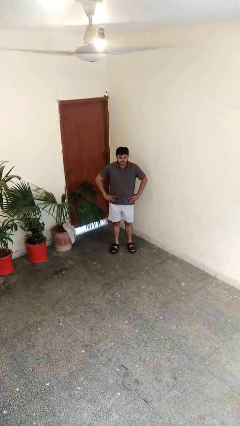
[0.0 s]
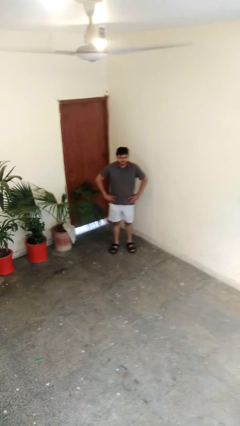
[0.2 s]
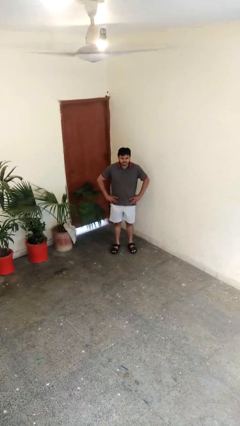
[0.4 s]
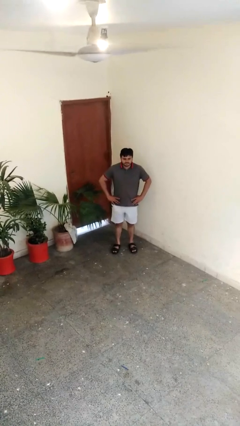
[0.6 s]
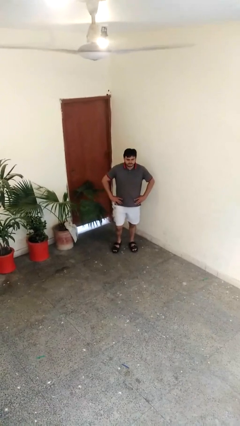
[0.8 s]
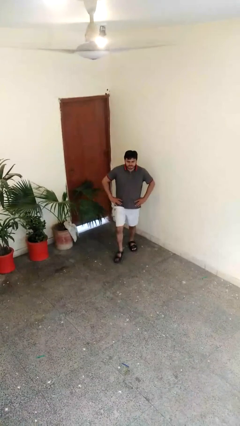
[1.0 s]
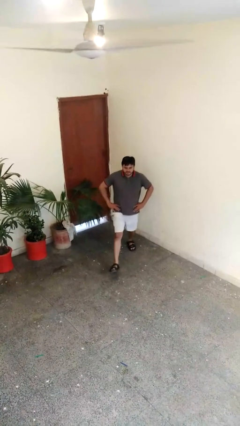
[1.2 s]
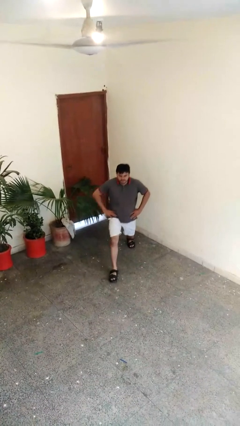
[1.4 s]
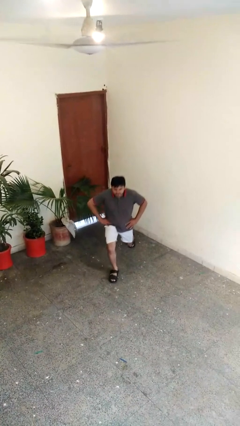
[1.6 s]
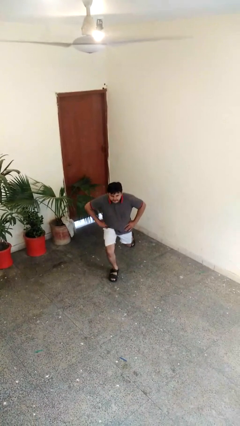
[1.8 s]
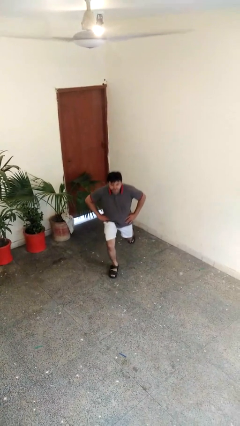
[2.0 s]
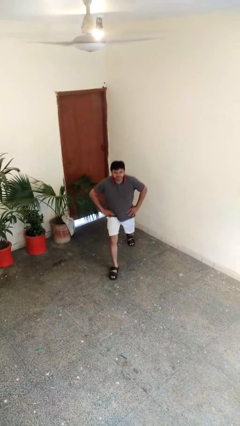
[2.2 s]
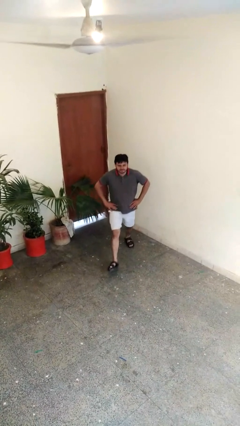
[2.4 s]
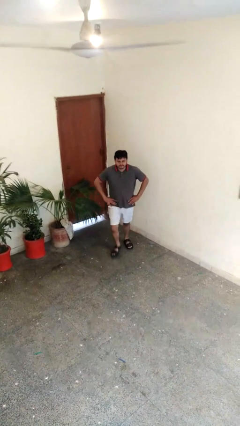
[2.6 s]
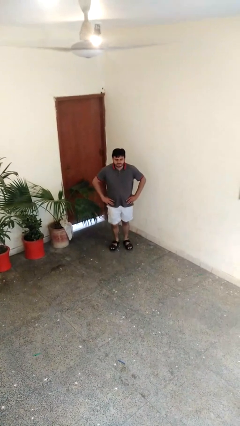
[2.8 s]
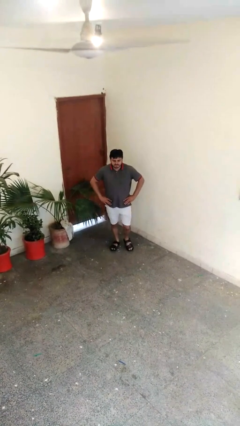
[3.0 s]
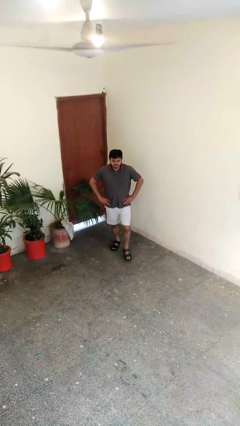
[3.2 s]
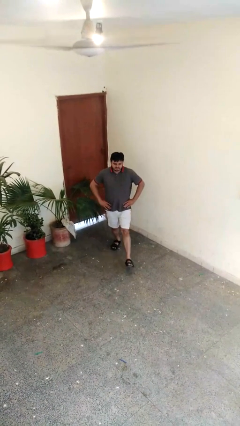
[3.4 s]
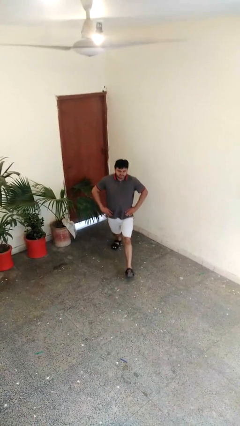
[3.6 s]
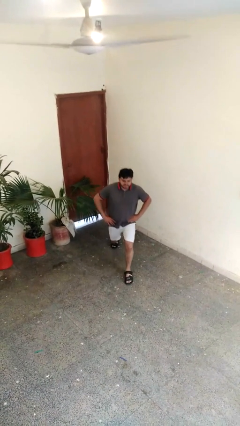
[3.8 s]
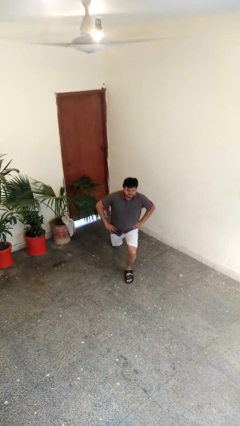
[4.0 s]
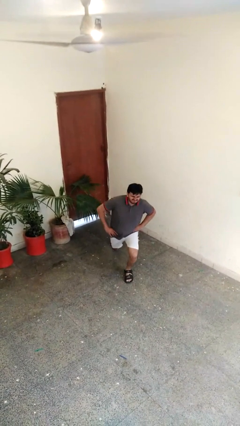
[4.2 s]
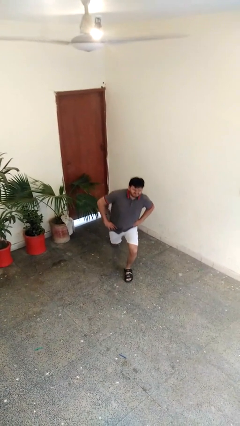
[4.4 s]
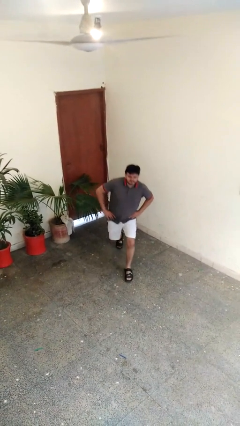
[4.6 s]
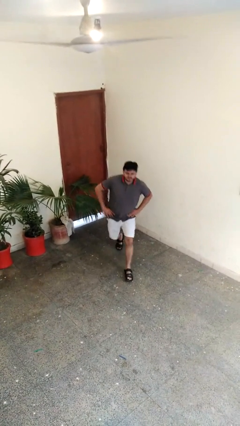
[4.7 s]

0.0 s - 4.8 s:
person exercises with lunges

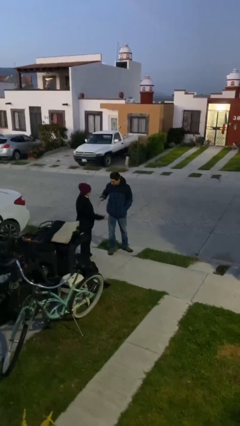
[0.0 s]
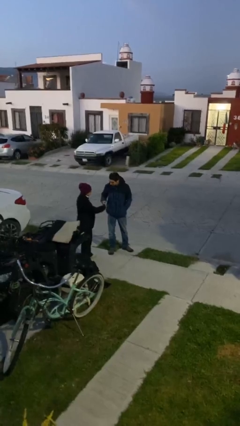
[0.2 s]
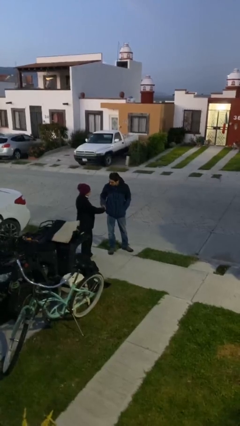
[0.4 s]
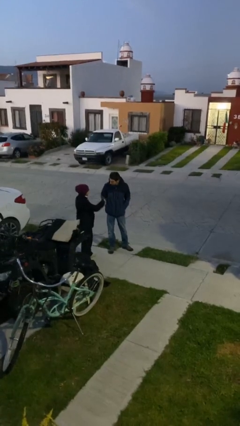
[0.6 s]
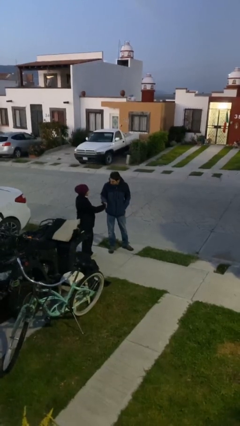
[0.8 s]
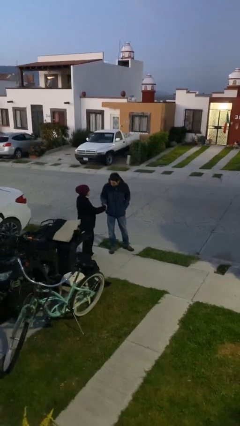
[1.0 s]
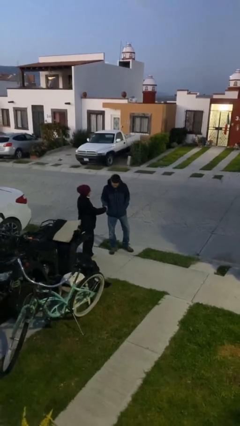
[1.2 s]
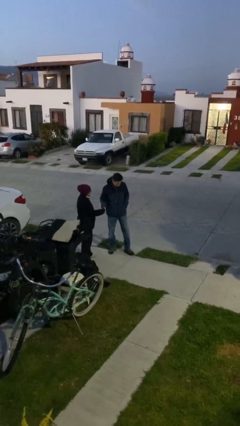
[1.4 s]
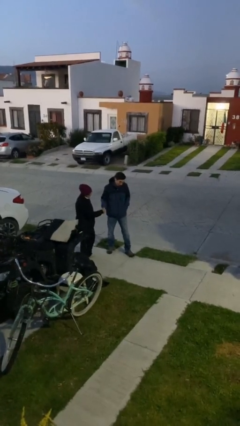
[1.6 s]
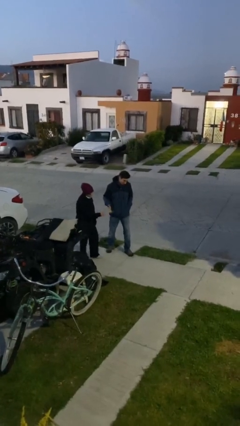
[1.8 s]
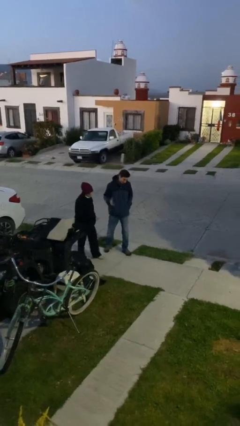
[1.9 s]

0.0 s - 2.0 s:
person shakes hand

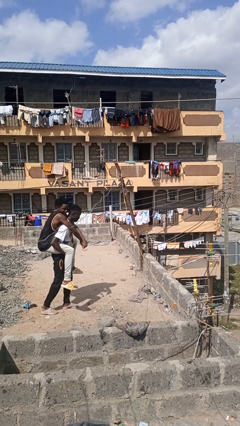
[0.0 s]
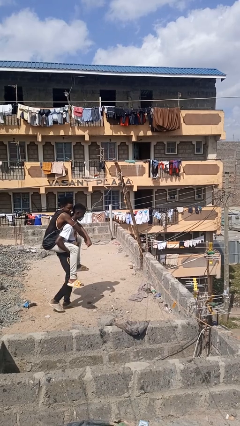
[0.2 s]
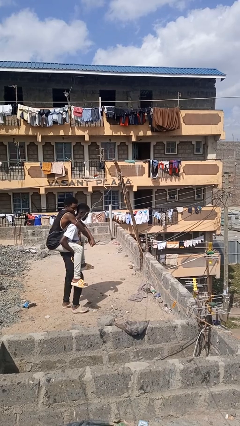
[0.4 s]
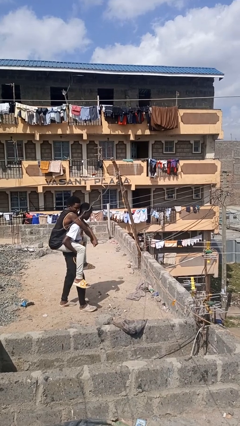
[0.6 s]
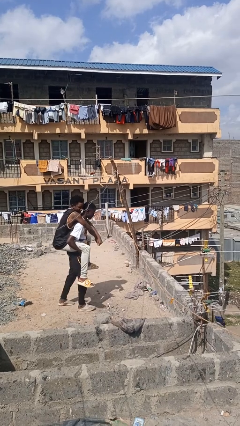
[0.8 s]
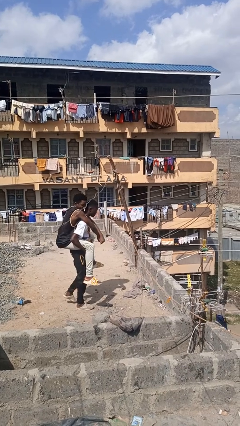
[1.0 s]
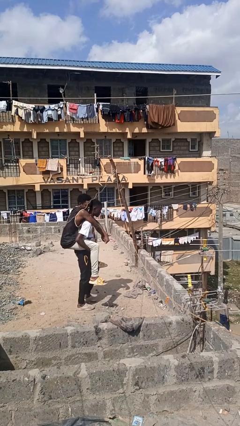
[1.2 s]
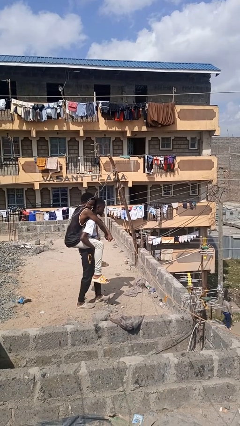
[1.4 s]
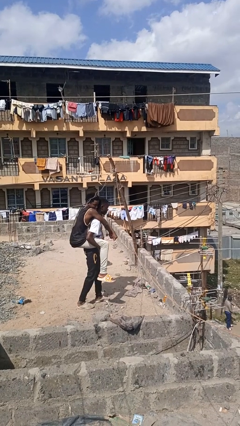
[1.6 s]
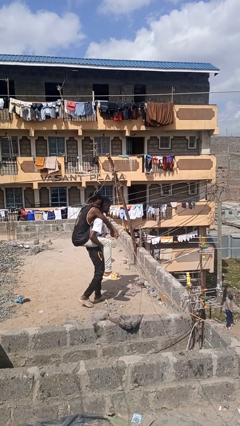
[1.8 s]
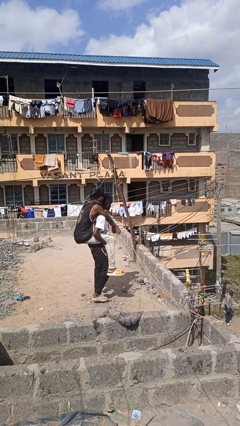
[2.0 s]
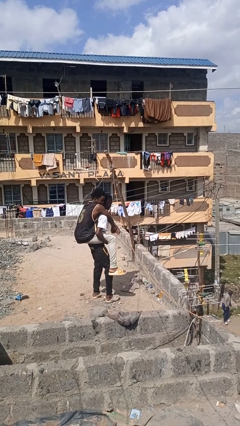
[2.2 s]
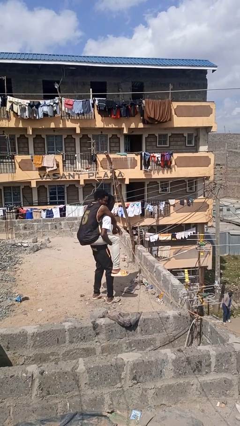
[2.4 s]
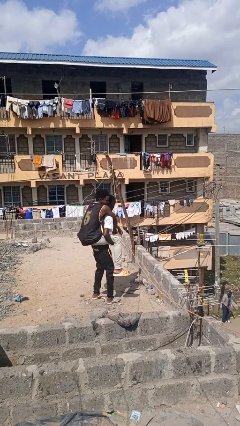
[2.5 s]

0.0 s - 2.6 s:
person carries person on back

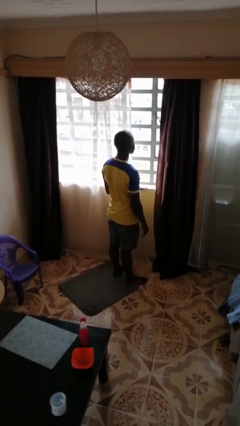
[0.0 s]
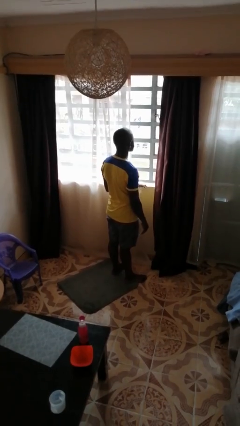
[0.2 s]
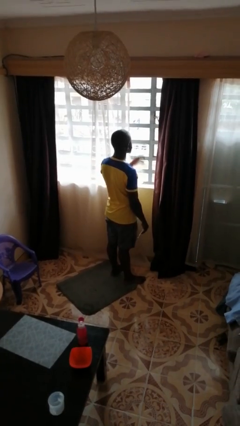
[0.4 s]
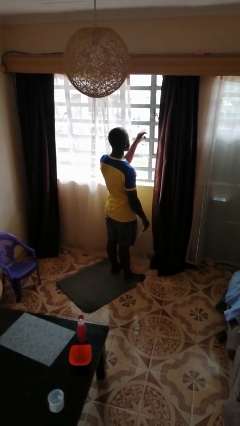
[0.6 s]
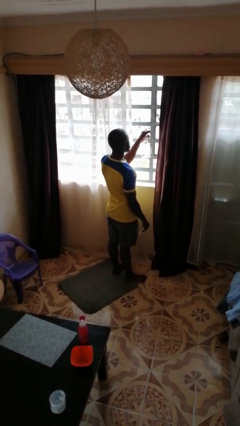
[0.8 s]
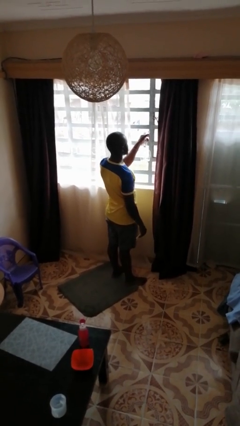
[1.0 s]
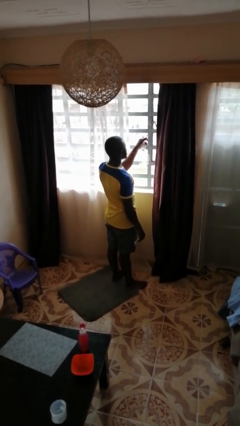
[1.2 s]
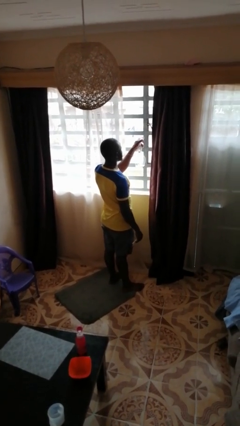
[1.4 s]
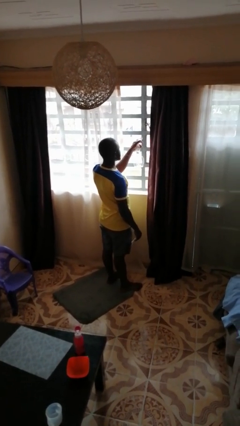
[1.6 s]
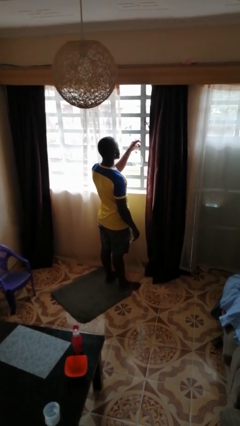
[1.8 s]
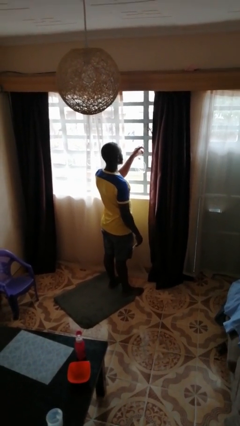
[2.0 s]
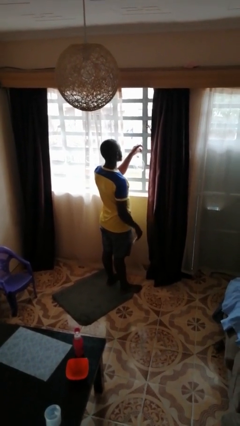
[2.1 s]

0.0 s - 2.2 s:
person sprays from bottle

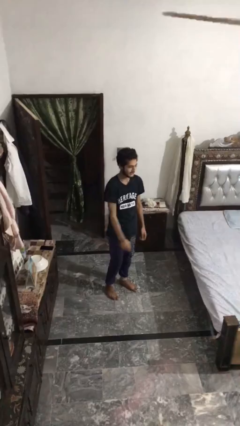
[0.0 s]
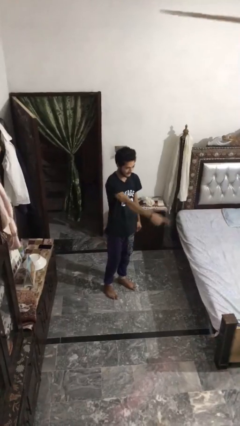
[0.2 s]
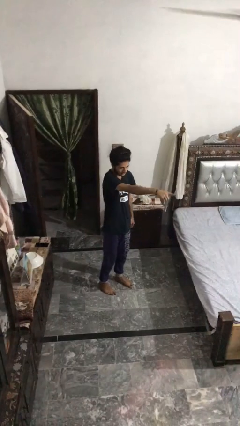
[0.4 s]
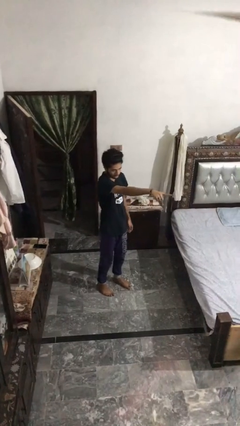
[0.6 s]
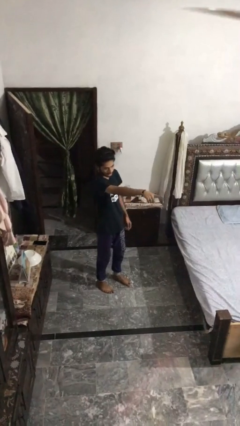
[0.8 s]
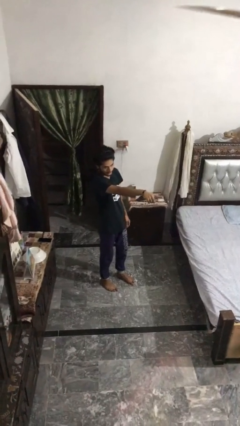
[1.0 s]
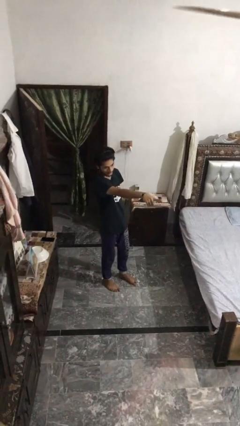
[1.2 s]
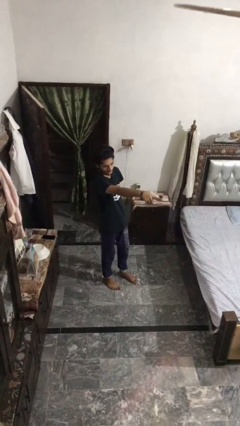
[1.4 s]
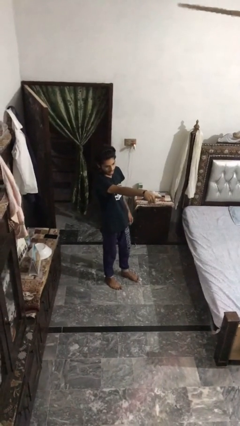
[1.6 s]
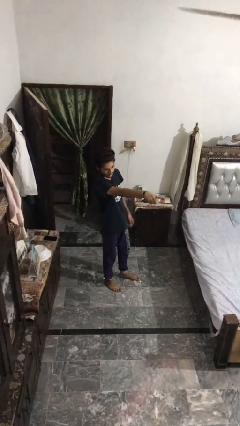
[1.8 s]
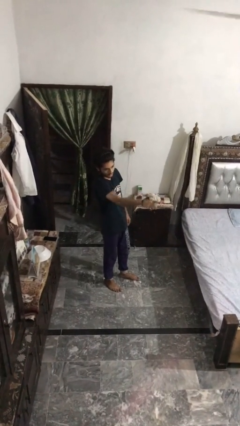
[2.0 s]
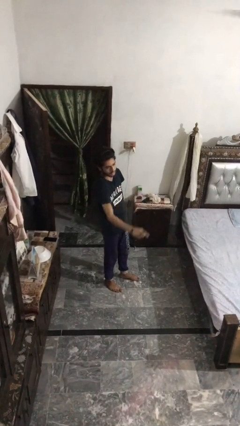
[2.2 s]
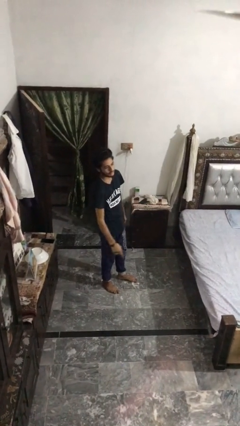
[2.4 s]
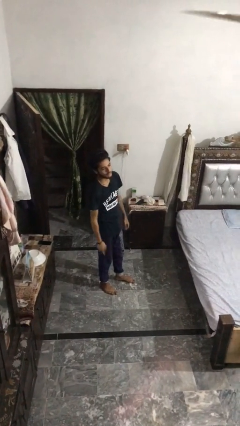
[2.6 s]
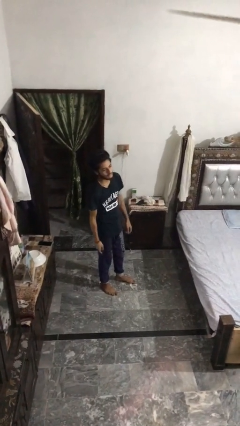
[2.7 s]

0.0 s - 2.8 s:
person points at person

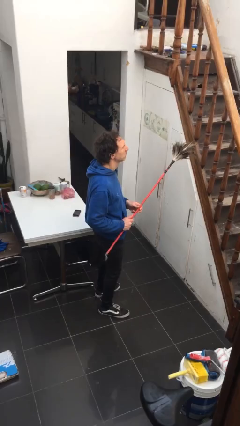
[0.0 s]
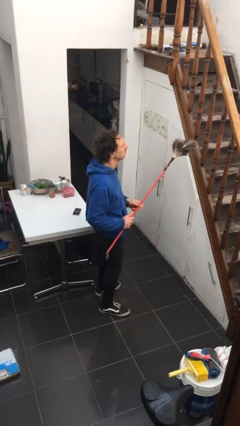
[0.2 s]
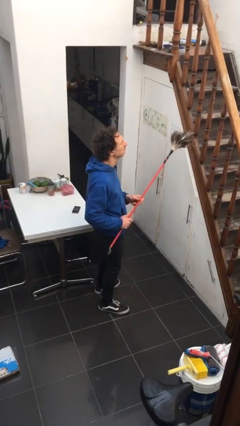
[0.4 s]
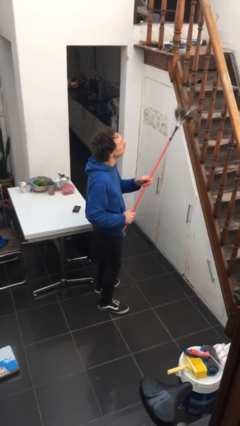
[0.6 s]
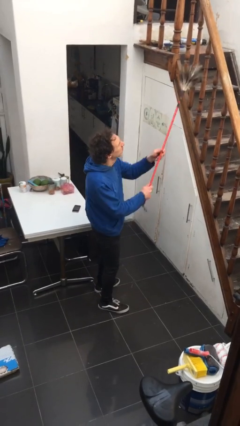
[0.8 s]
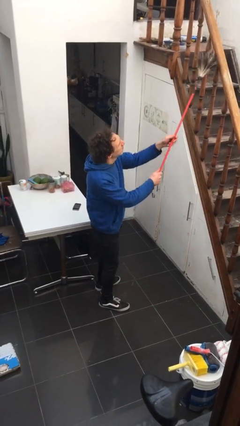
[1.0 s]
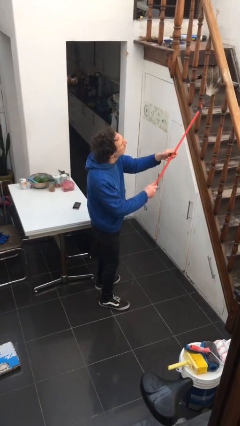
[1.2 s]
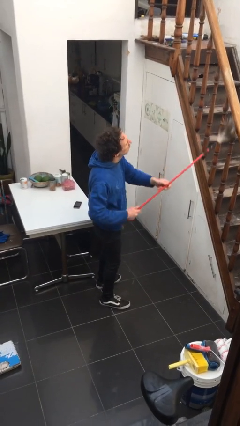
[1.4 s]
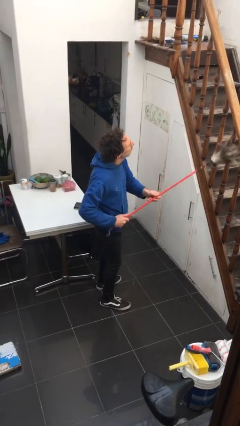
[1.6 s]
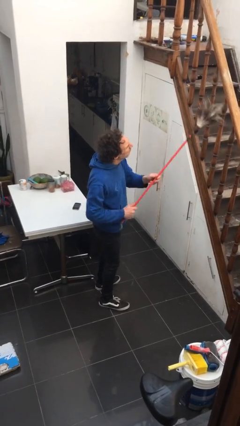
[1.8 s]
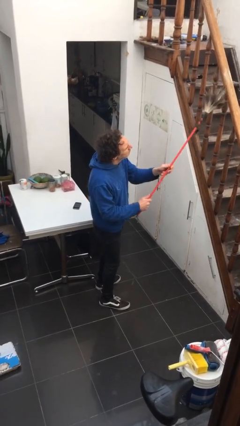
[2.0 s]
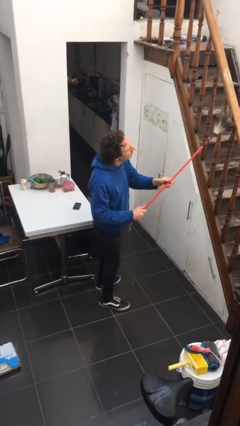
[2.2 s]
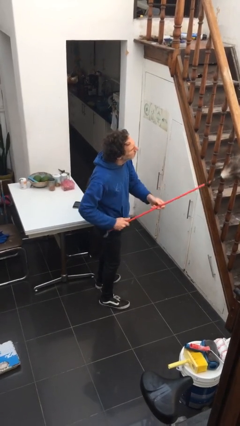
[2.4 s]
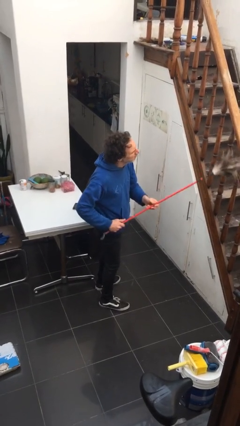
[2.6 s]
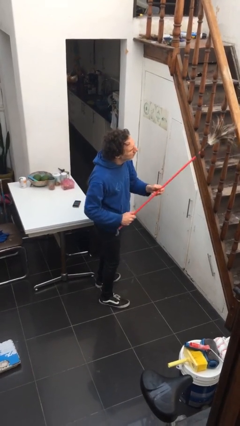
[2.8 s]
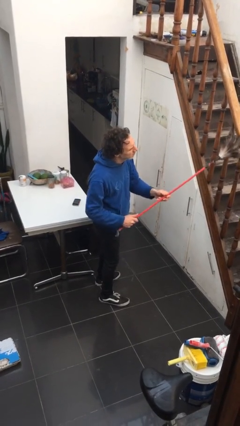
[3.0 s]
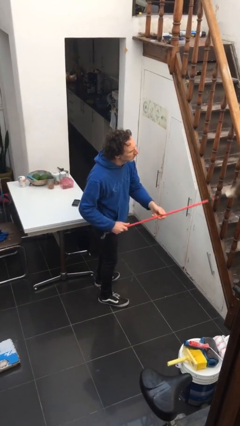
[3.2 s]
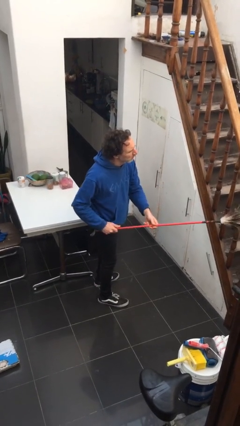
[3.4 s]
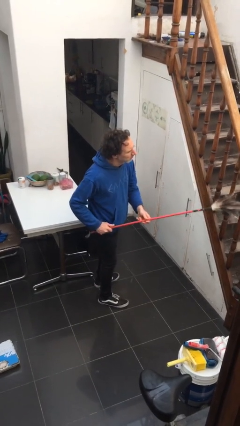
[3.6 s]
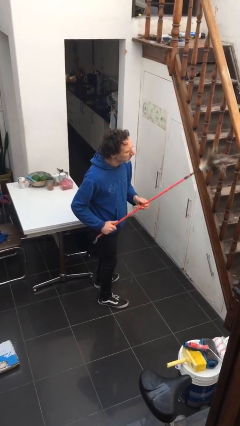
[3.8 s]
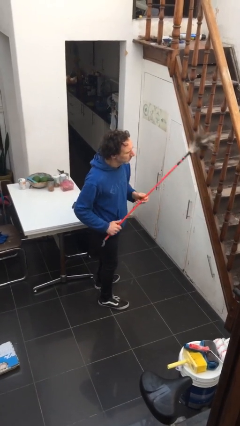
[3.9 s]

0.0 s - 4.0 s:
person dusts furniture
